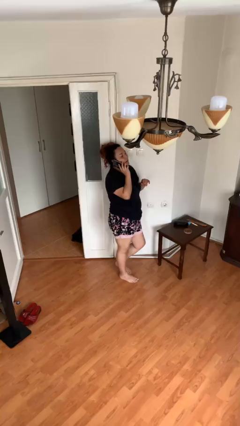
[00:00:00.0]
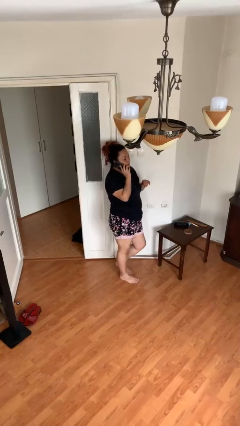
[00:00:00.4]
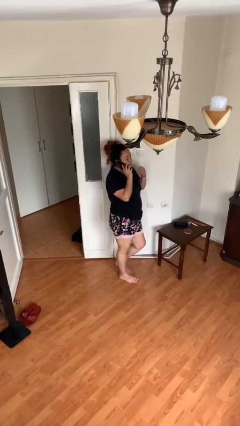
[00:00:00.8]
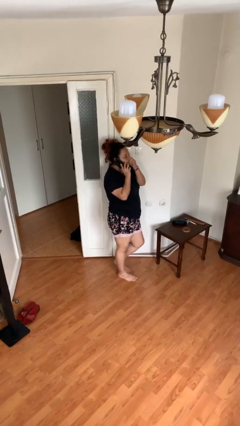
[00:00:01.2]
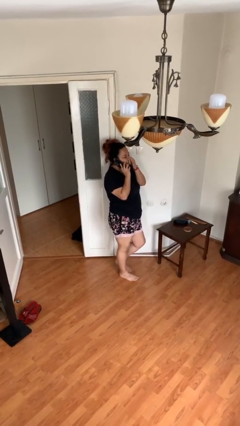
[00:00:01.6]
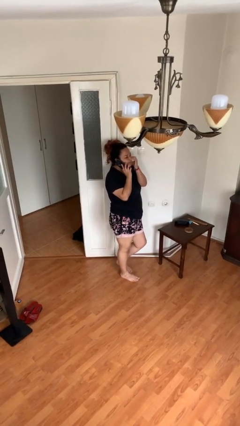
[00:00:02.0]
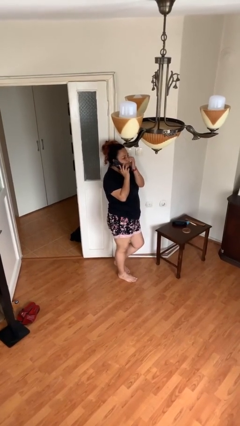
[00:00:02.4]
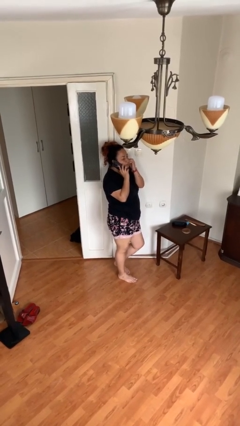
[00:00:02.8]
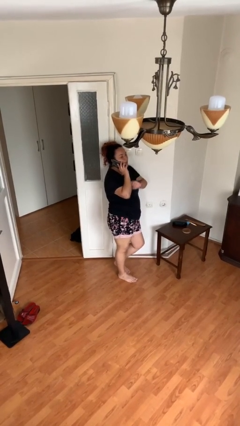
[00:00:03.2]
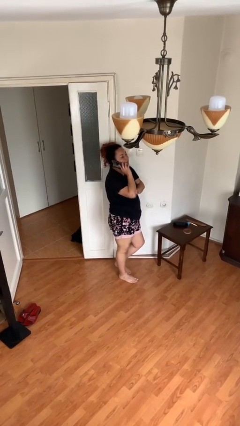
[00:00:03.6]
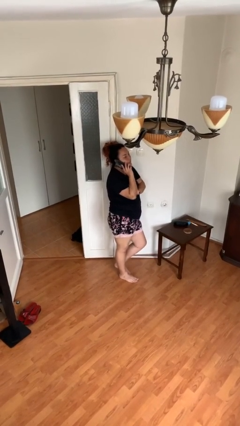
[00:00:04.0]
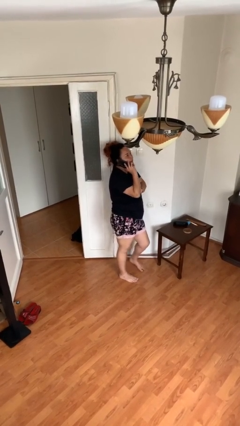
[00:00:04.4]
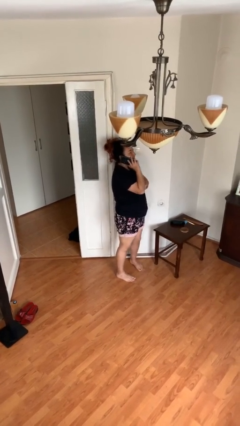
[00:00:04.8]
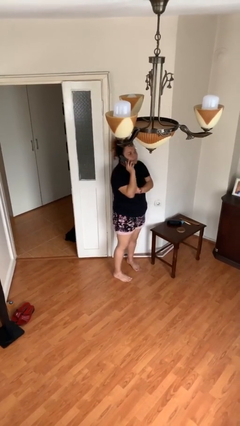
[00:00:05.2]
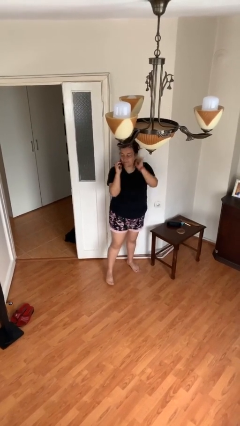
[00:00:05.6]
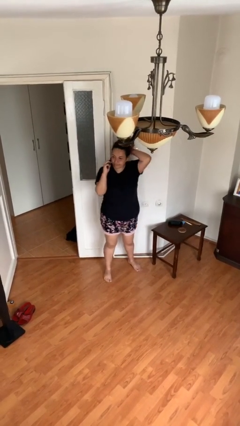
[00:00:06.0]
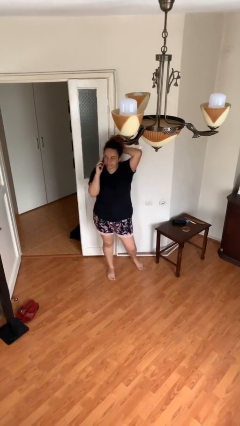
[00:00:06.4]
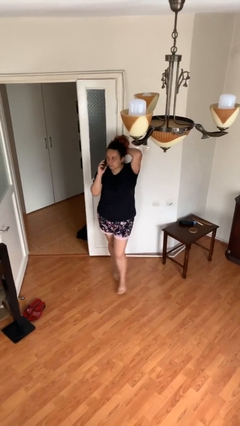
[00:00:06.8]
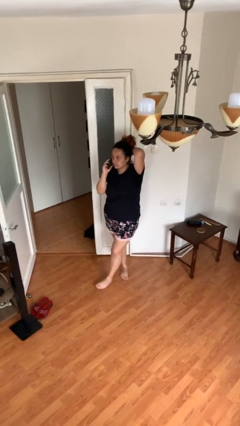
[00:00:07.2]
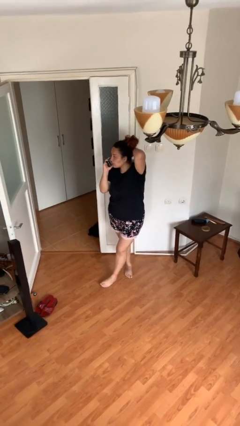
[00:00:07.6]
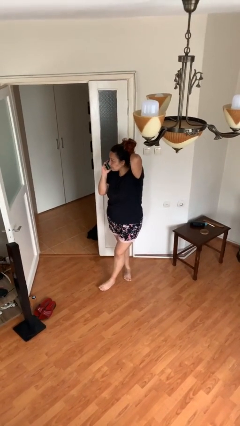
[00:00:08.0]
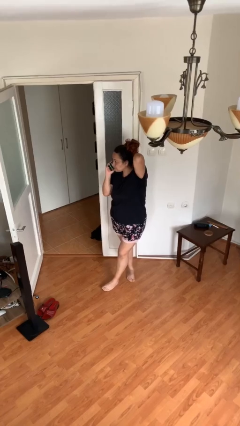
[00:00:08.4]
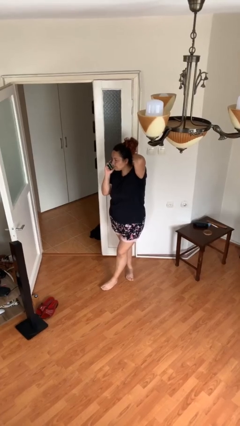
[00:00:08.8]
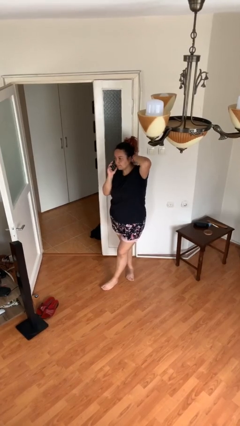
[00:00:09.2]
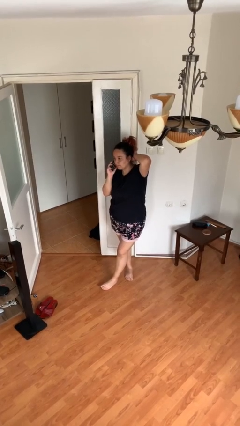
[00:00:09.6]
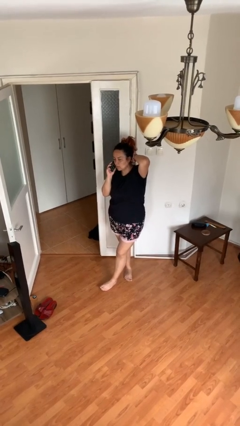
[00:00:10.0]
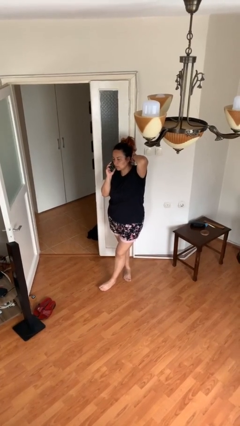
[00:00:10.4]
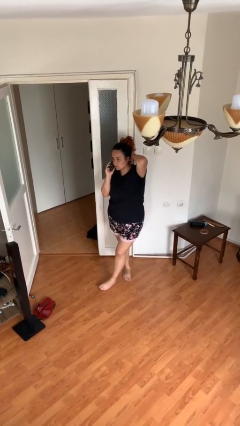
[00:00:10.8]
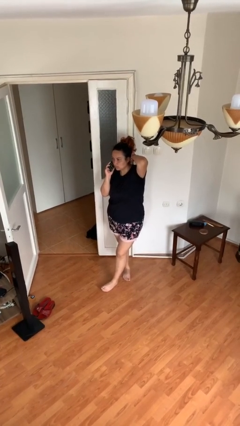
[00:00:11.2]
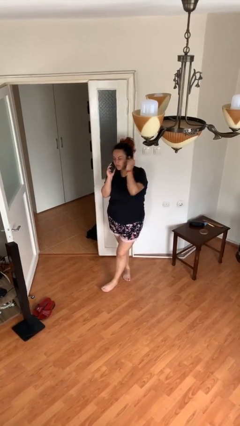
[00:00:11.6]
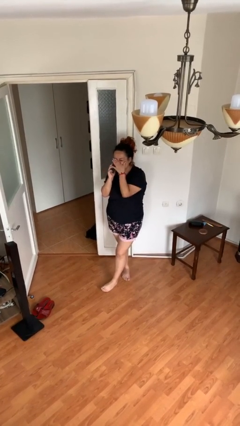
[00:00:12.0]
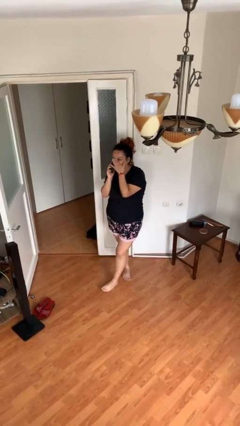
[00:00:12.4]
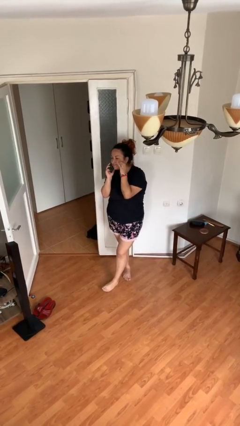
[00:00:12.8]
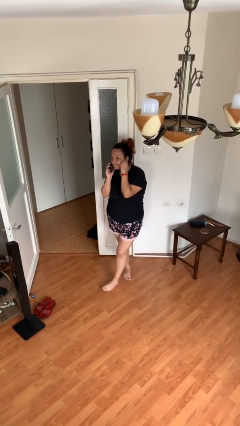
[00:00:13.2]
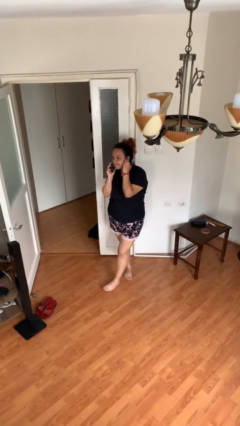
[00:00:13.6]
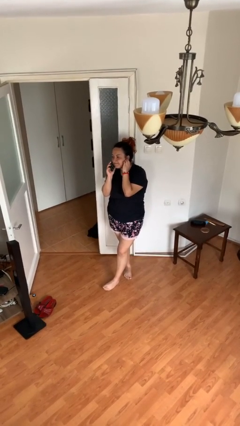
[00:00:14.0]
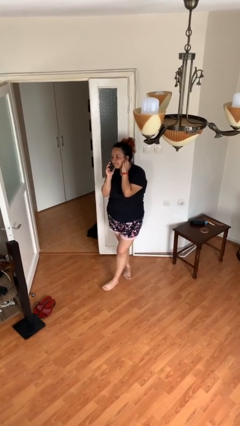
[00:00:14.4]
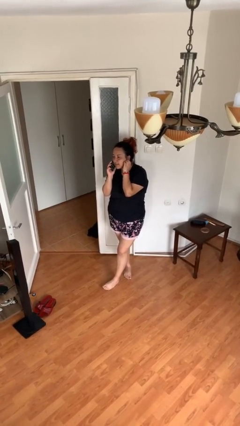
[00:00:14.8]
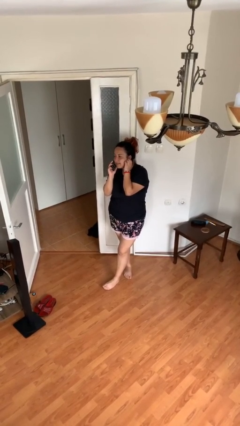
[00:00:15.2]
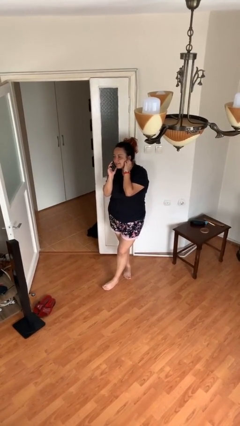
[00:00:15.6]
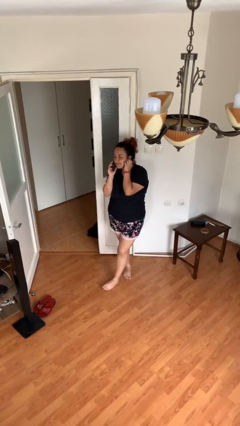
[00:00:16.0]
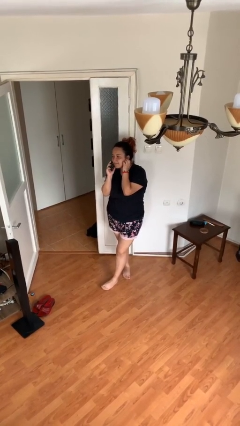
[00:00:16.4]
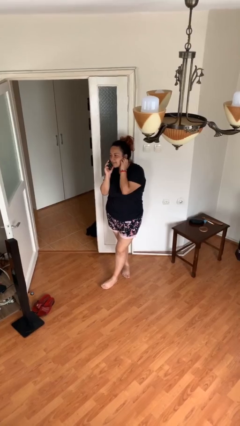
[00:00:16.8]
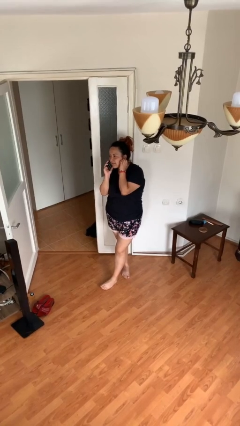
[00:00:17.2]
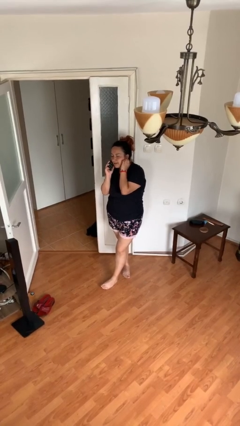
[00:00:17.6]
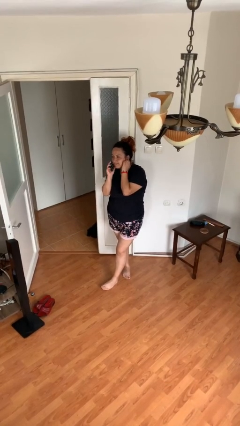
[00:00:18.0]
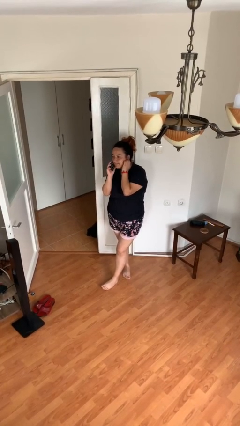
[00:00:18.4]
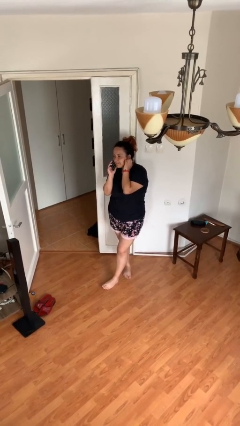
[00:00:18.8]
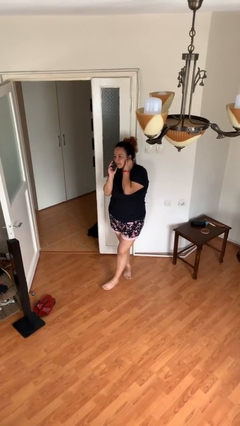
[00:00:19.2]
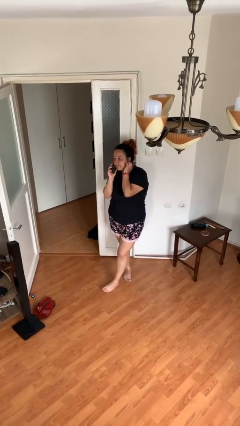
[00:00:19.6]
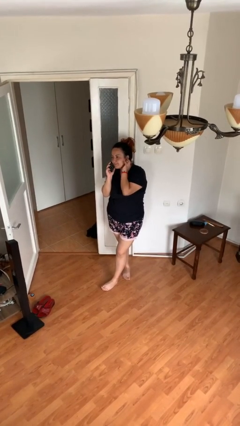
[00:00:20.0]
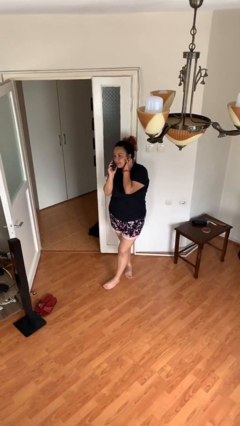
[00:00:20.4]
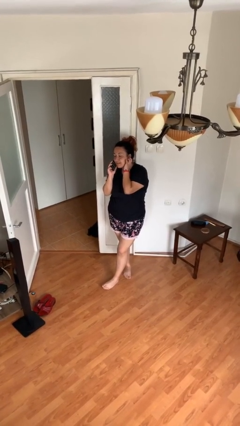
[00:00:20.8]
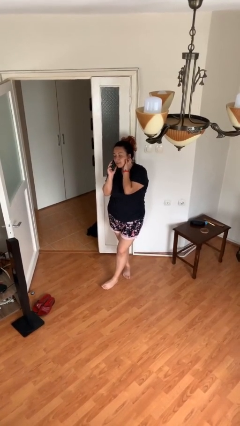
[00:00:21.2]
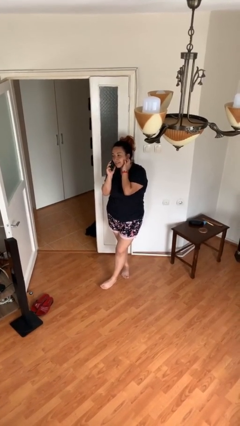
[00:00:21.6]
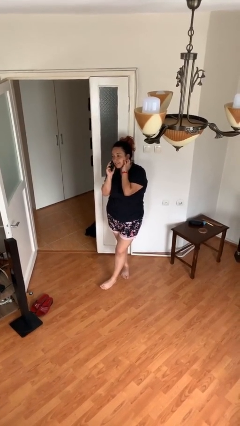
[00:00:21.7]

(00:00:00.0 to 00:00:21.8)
person talks on phone

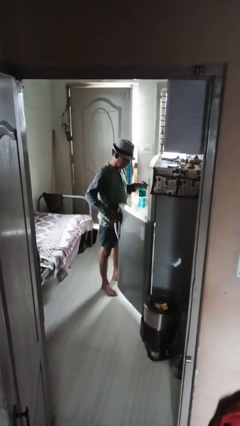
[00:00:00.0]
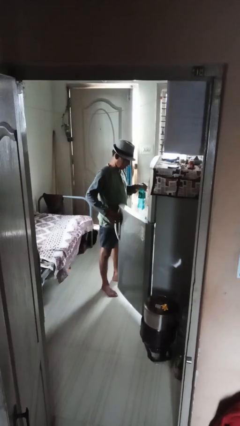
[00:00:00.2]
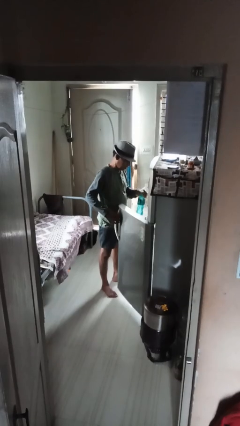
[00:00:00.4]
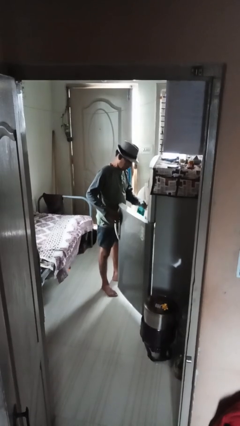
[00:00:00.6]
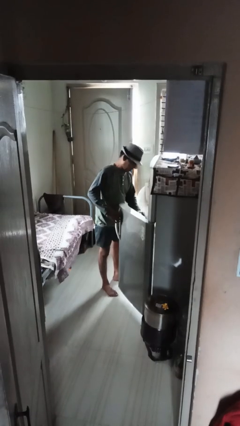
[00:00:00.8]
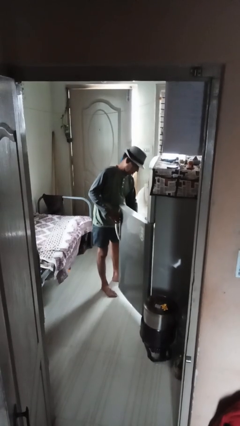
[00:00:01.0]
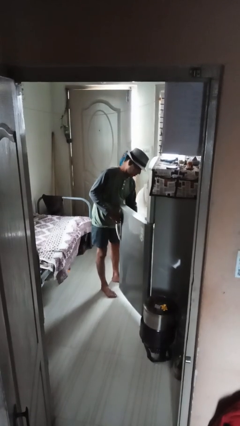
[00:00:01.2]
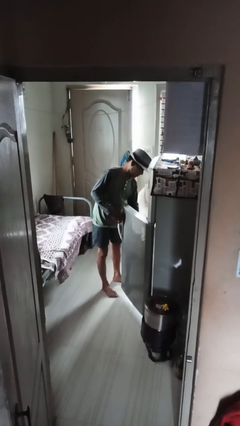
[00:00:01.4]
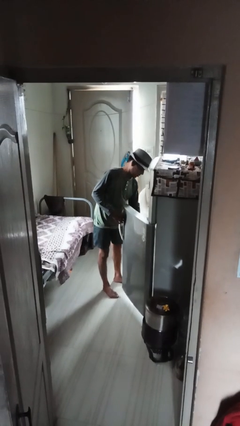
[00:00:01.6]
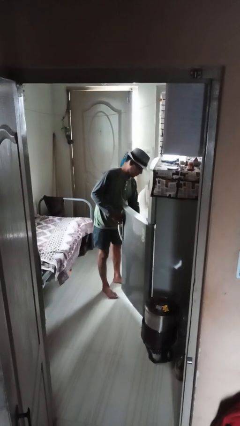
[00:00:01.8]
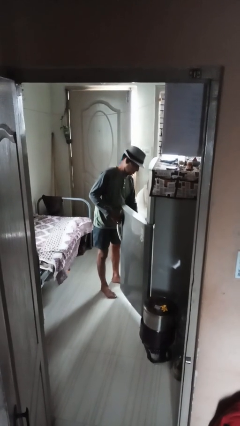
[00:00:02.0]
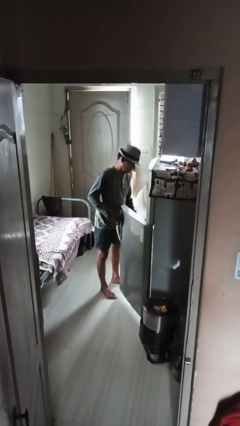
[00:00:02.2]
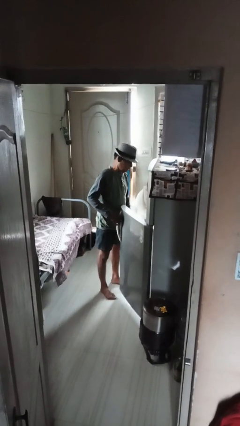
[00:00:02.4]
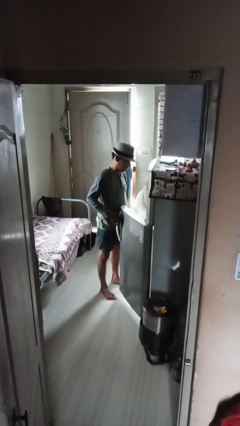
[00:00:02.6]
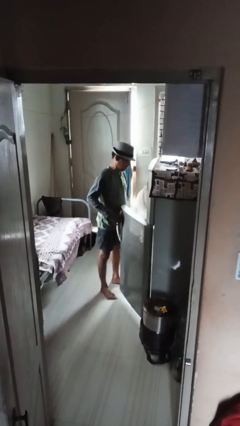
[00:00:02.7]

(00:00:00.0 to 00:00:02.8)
person puts object into refrigerator

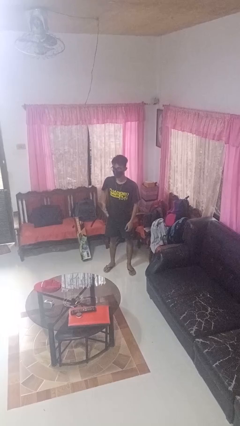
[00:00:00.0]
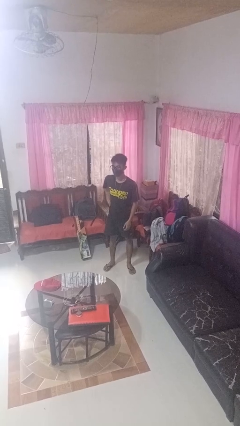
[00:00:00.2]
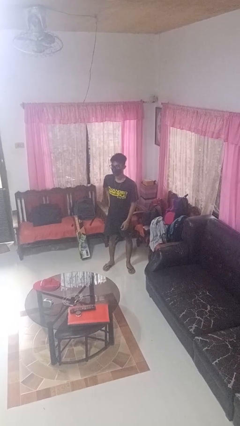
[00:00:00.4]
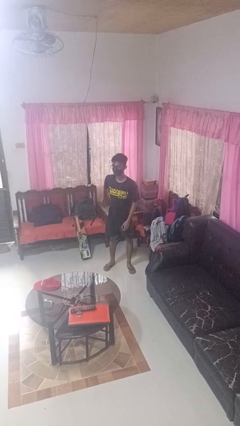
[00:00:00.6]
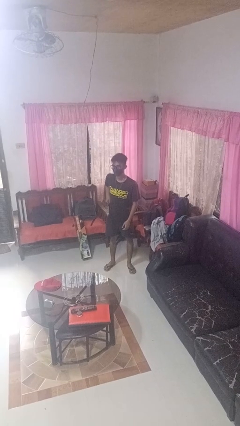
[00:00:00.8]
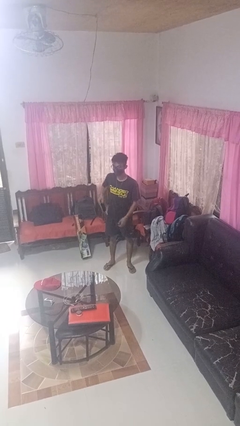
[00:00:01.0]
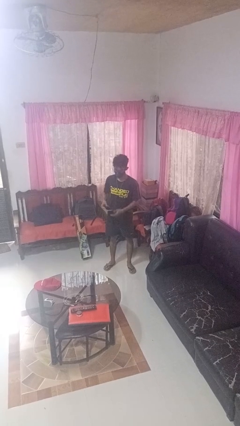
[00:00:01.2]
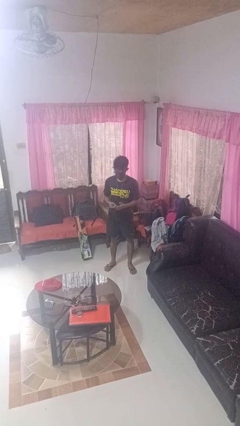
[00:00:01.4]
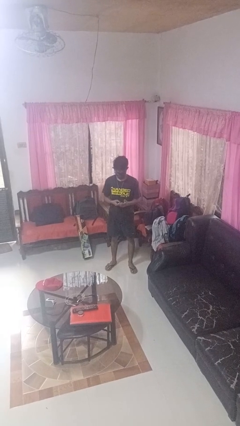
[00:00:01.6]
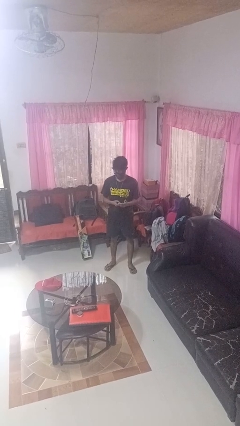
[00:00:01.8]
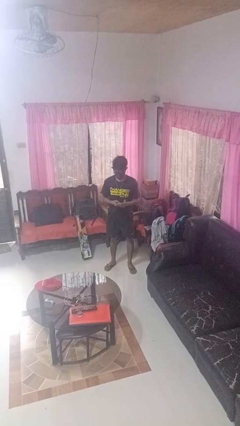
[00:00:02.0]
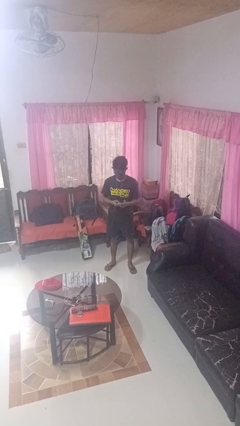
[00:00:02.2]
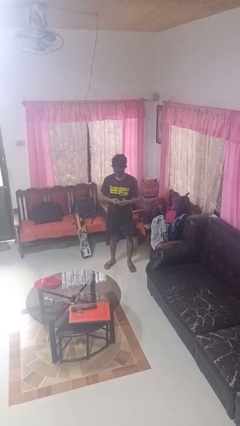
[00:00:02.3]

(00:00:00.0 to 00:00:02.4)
person takes phone from pocket

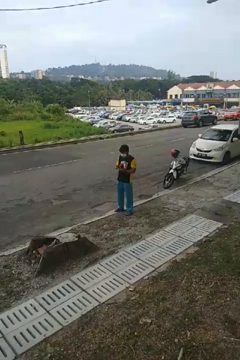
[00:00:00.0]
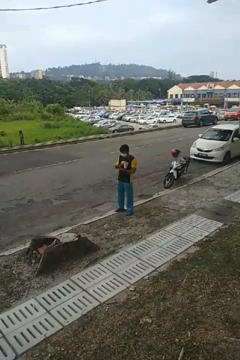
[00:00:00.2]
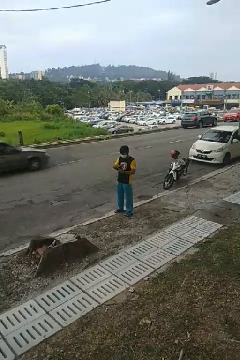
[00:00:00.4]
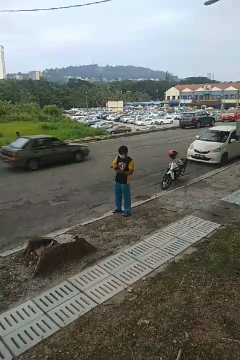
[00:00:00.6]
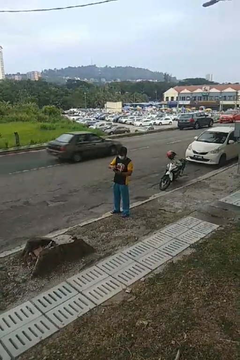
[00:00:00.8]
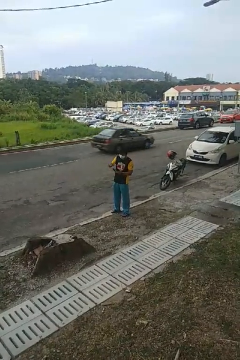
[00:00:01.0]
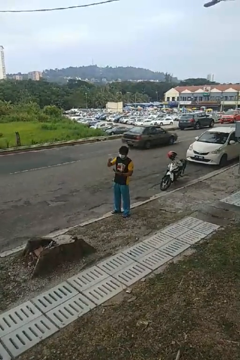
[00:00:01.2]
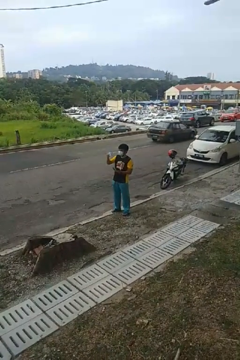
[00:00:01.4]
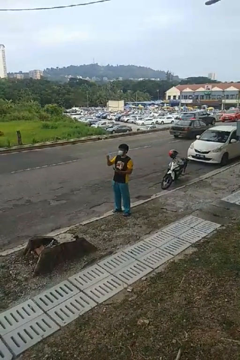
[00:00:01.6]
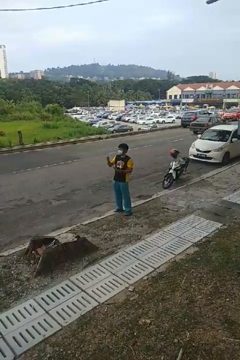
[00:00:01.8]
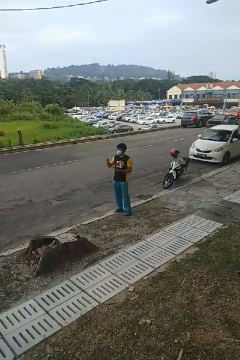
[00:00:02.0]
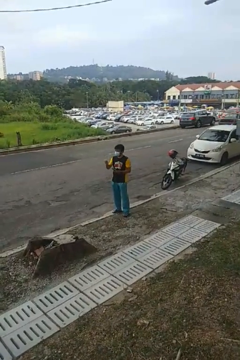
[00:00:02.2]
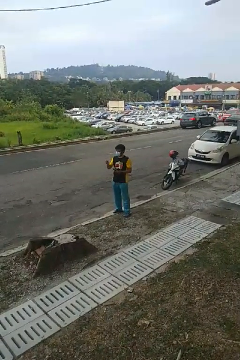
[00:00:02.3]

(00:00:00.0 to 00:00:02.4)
person takes object from purse
